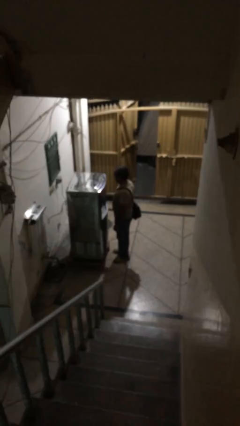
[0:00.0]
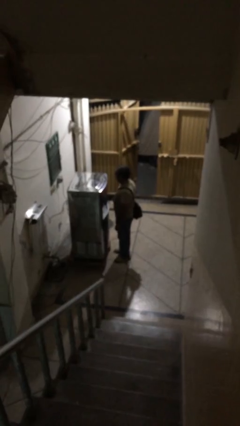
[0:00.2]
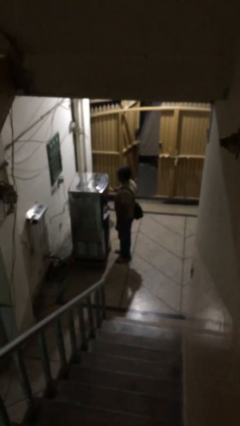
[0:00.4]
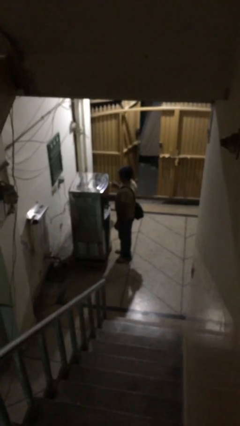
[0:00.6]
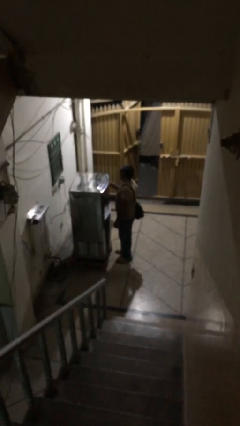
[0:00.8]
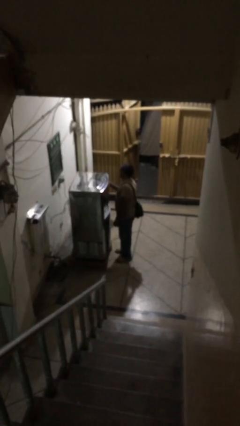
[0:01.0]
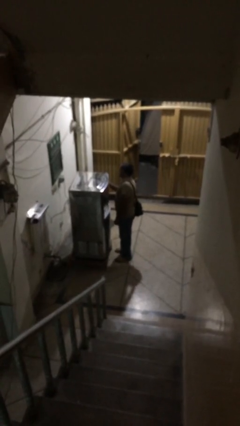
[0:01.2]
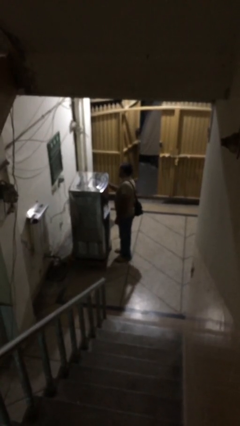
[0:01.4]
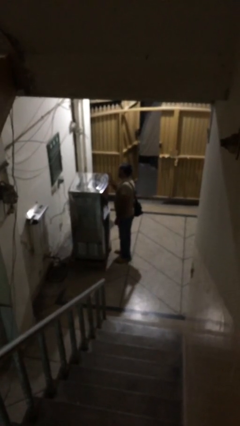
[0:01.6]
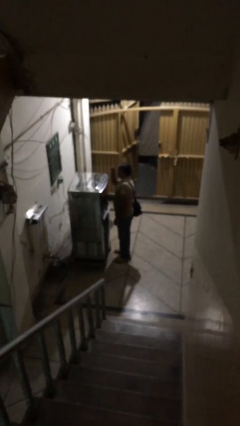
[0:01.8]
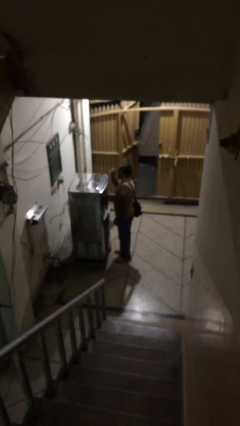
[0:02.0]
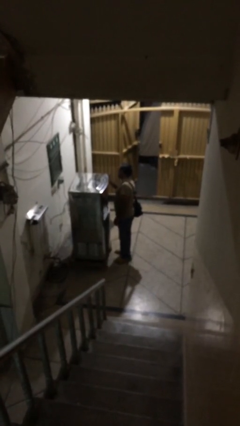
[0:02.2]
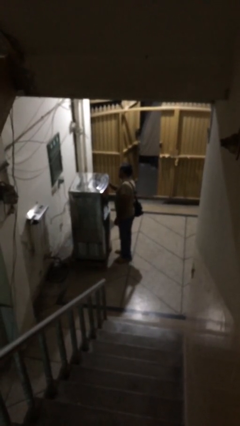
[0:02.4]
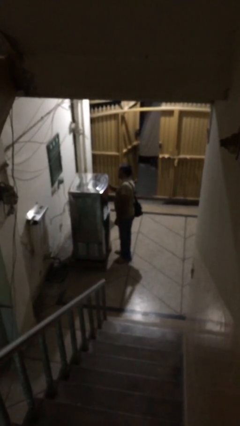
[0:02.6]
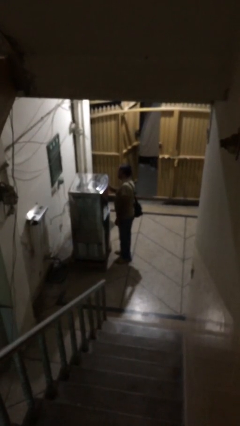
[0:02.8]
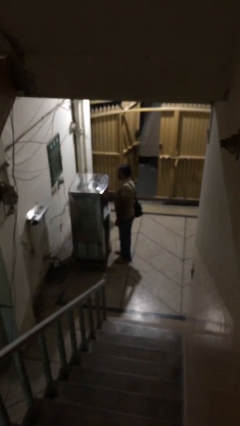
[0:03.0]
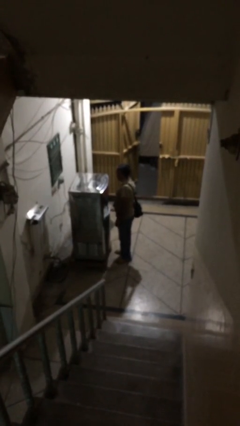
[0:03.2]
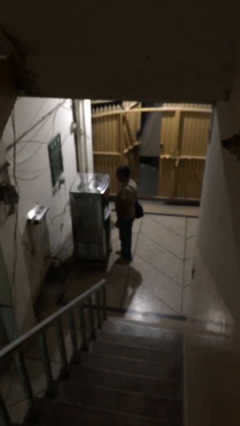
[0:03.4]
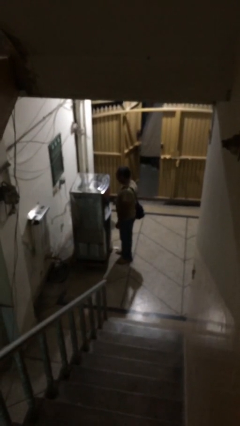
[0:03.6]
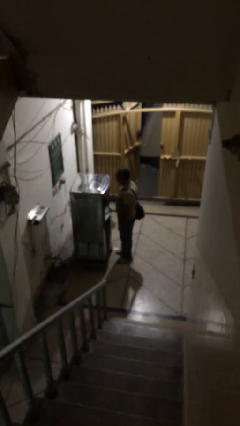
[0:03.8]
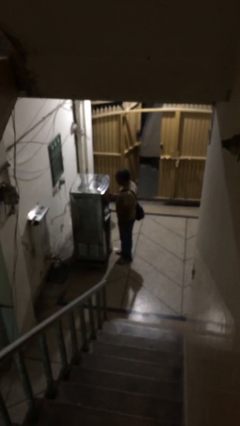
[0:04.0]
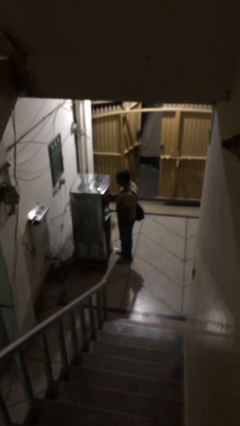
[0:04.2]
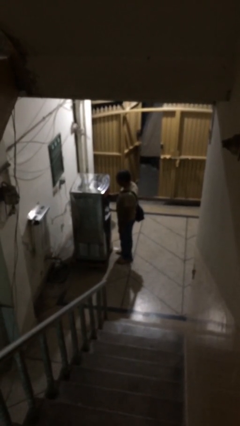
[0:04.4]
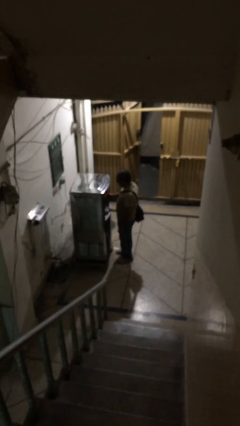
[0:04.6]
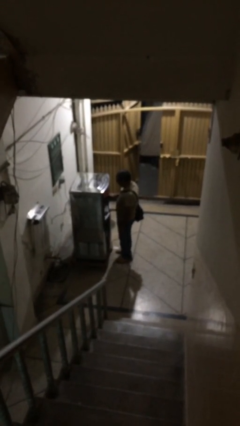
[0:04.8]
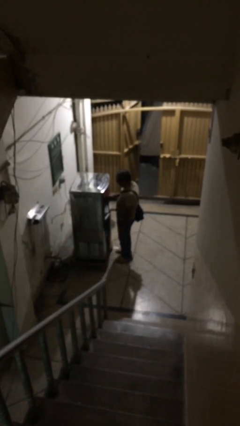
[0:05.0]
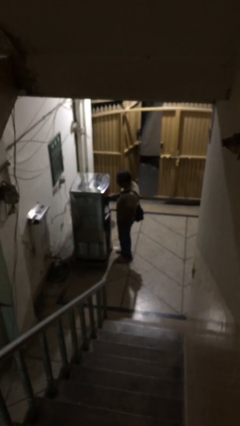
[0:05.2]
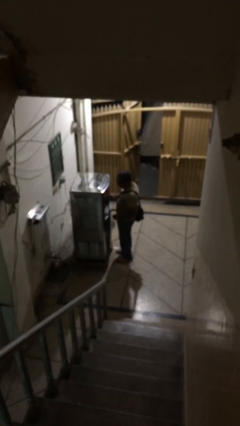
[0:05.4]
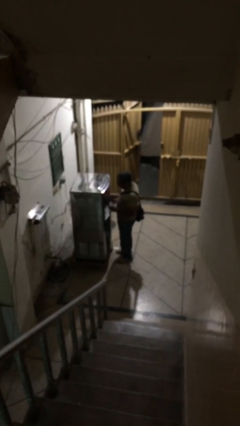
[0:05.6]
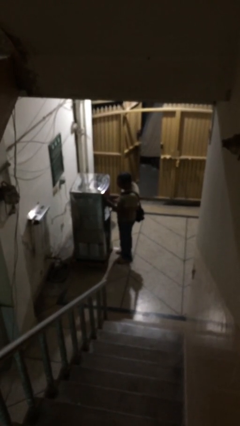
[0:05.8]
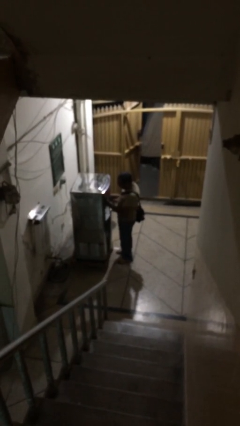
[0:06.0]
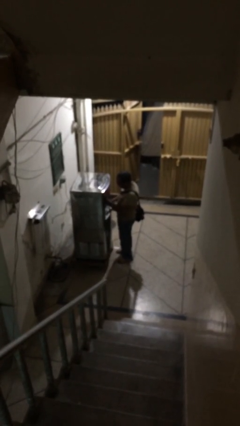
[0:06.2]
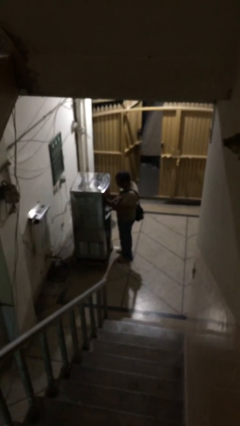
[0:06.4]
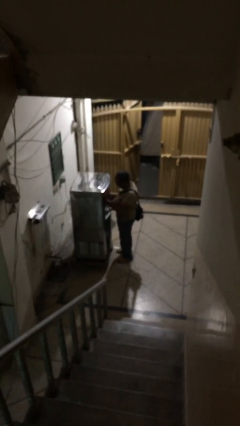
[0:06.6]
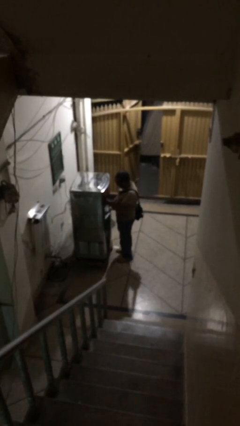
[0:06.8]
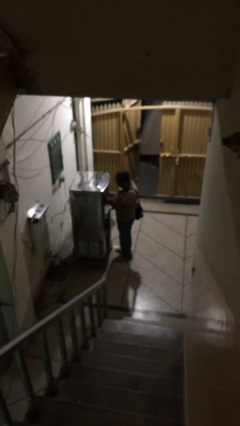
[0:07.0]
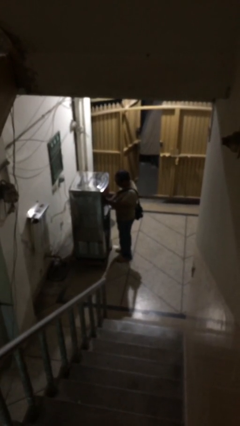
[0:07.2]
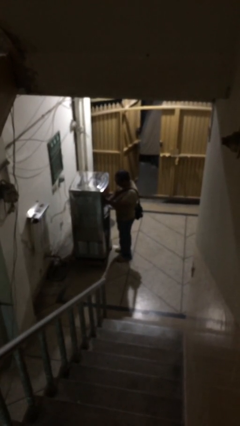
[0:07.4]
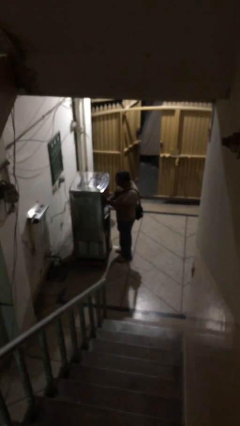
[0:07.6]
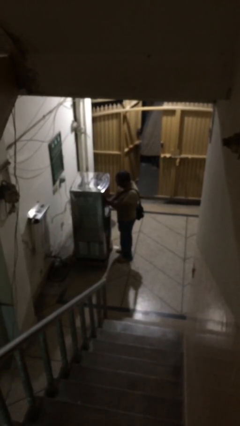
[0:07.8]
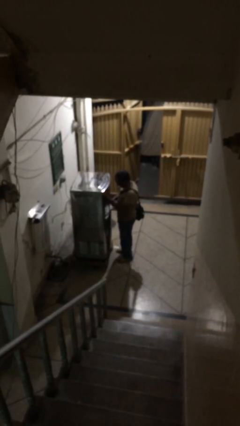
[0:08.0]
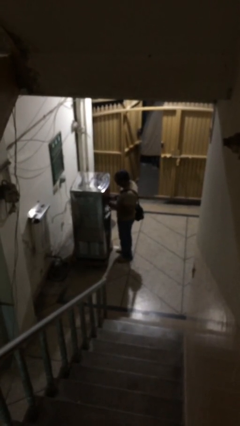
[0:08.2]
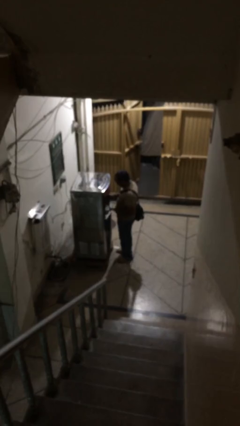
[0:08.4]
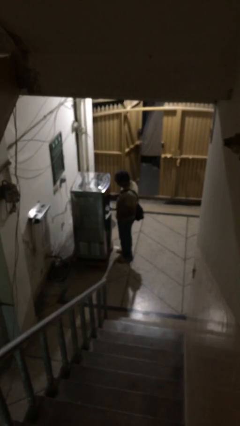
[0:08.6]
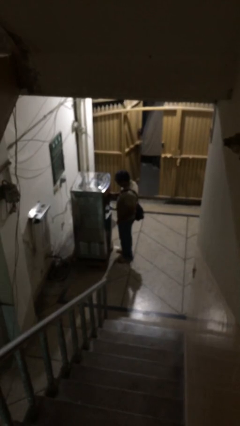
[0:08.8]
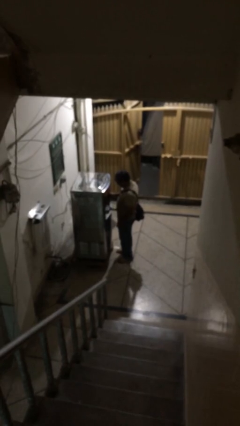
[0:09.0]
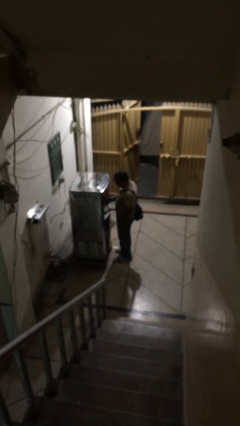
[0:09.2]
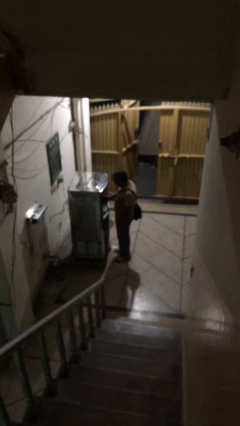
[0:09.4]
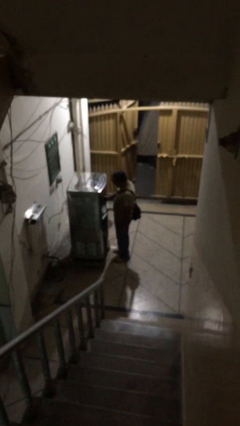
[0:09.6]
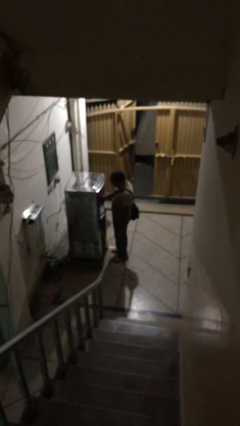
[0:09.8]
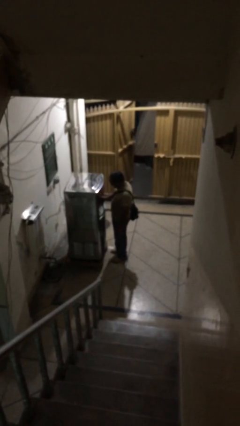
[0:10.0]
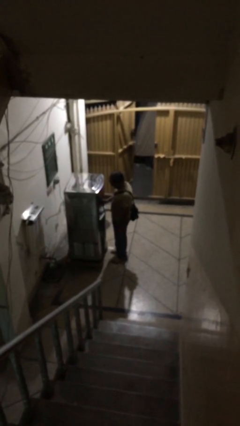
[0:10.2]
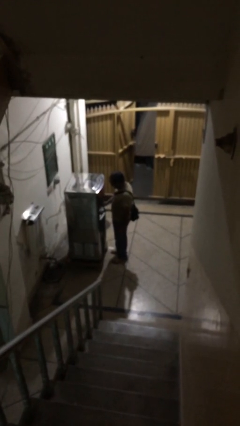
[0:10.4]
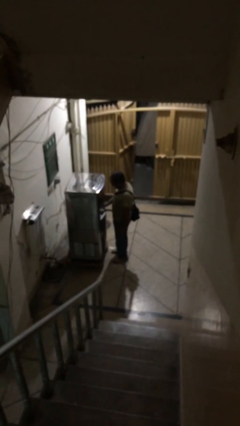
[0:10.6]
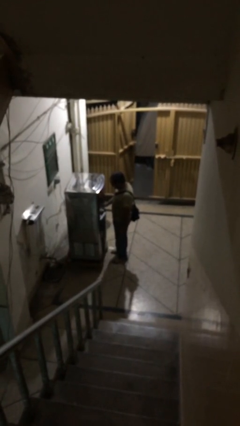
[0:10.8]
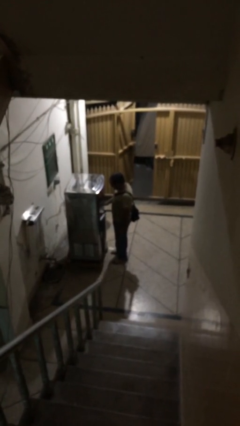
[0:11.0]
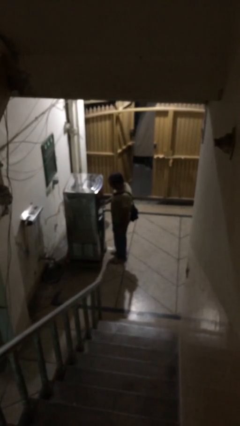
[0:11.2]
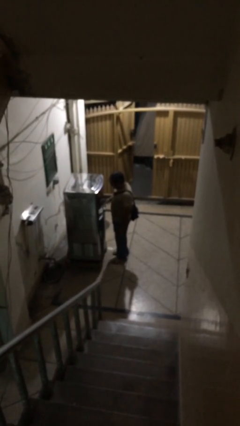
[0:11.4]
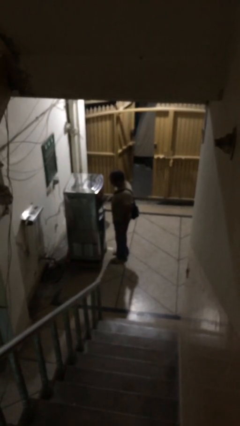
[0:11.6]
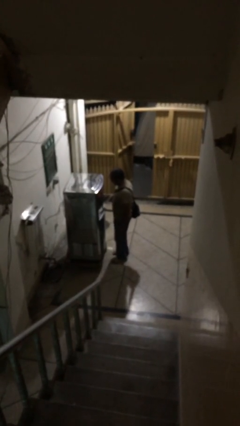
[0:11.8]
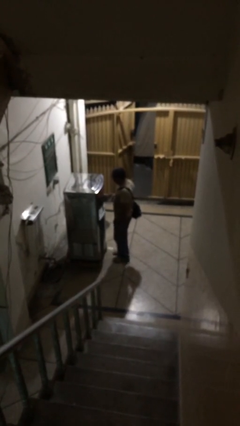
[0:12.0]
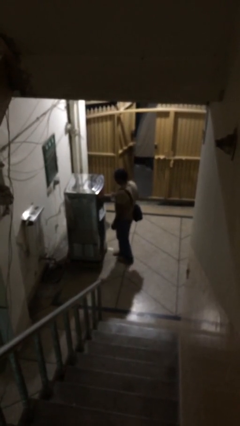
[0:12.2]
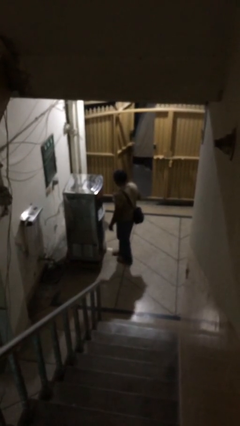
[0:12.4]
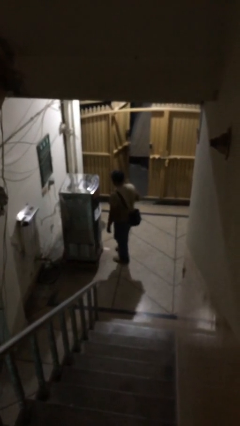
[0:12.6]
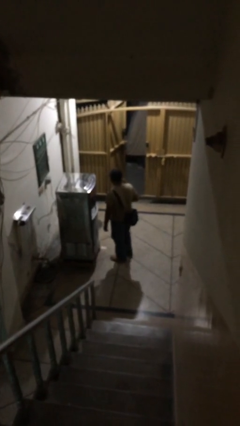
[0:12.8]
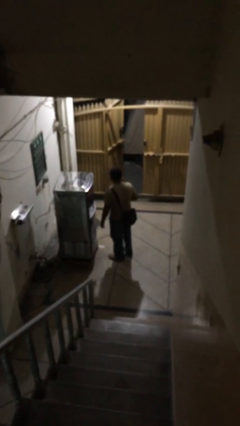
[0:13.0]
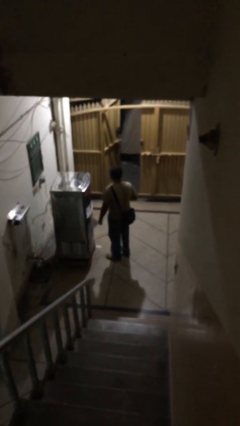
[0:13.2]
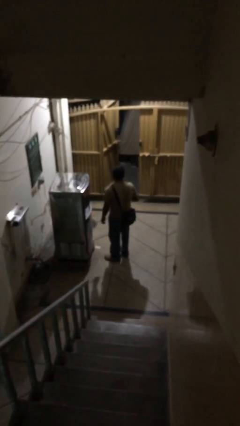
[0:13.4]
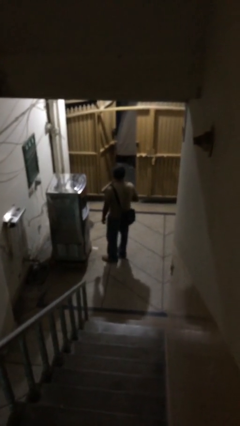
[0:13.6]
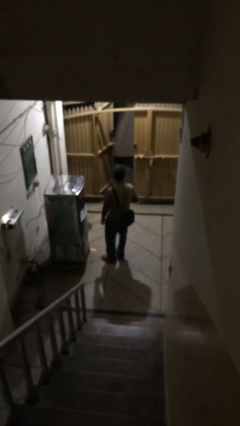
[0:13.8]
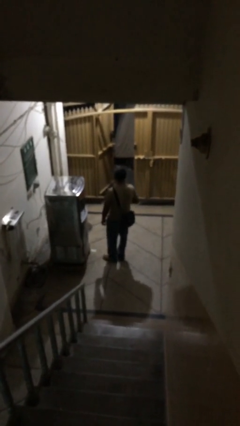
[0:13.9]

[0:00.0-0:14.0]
person purchases from machine

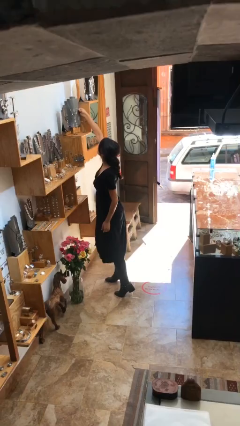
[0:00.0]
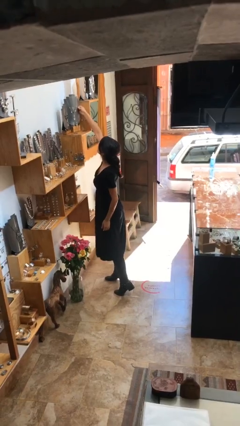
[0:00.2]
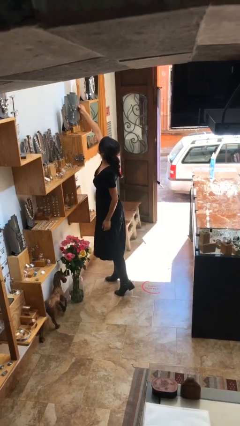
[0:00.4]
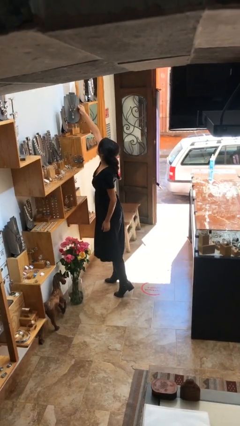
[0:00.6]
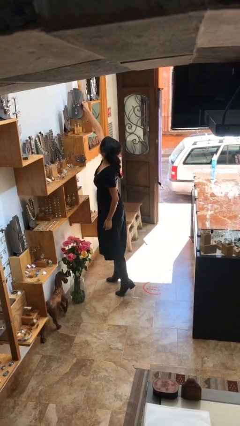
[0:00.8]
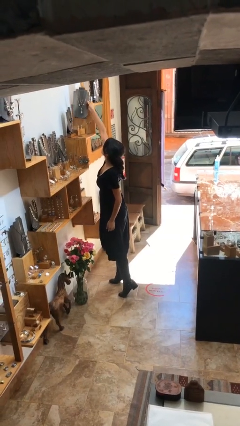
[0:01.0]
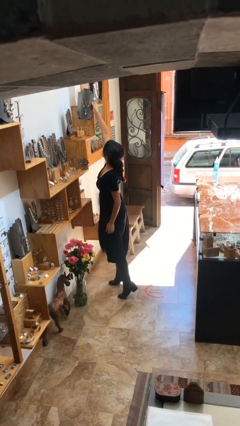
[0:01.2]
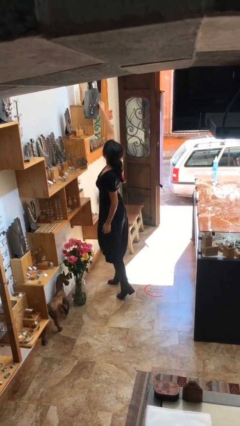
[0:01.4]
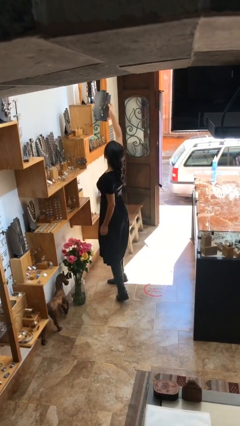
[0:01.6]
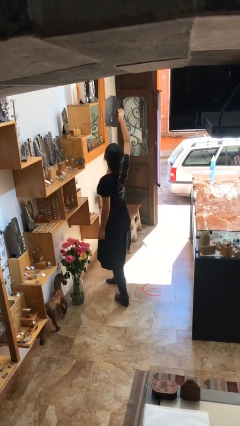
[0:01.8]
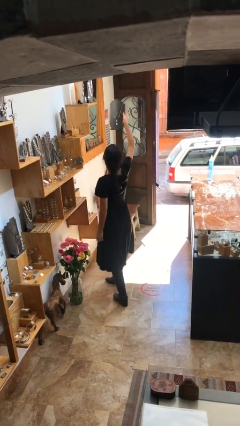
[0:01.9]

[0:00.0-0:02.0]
person picks up object from shelf

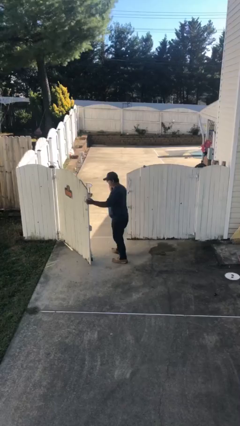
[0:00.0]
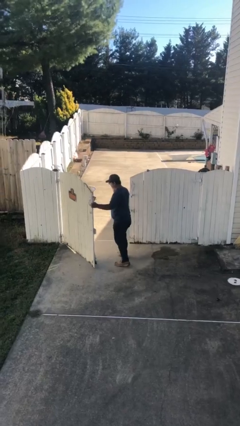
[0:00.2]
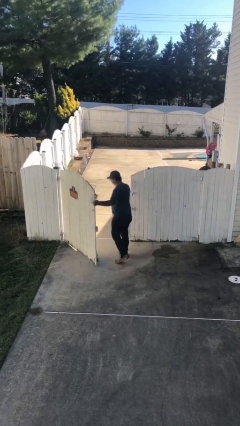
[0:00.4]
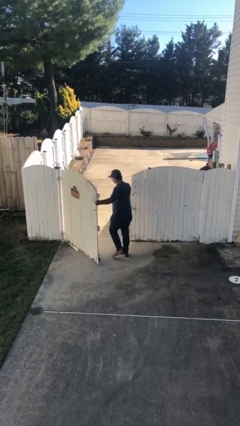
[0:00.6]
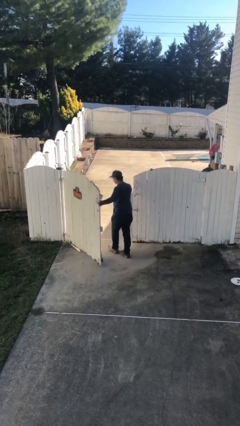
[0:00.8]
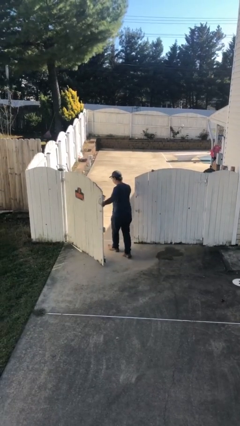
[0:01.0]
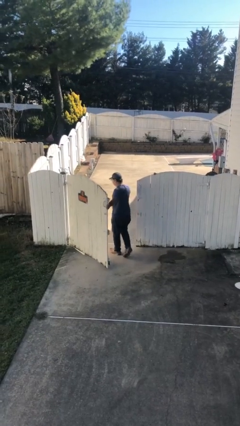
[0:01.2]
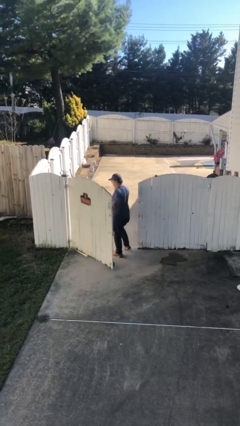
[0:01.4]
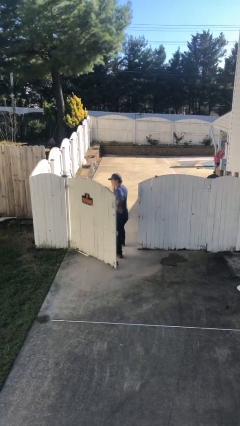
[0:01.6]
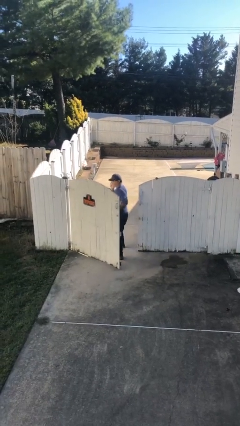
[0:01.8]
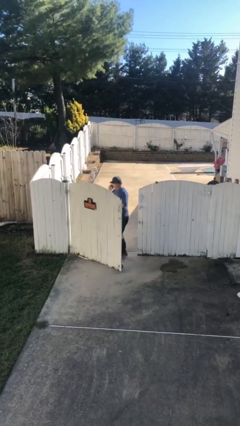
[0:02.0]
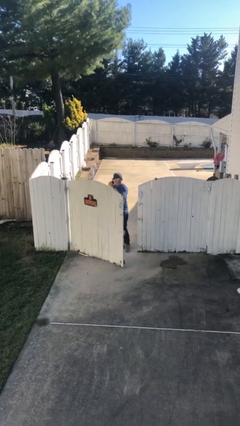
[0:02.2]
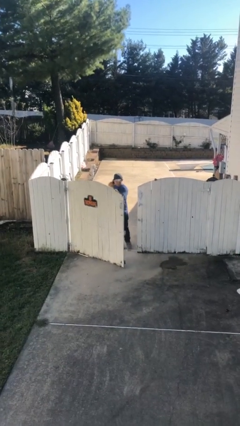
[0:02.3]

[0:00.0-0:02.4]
person exits scene through structure
